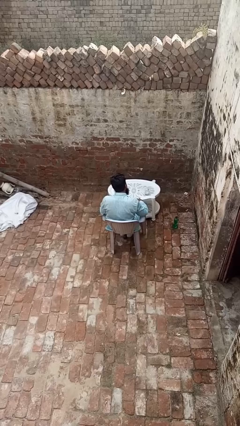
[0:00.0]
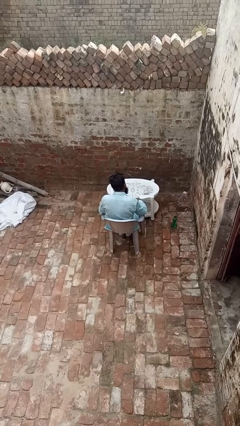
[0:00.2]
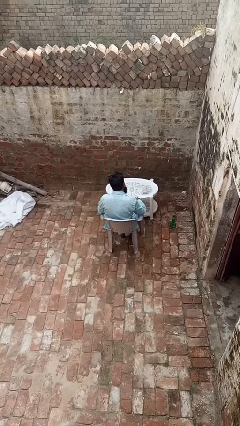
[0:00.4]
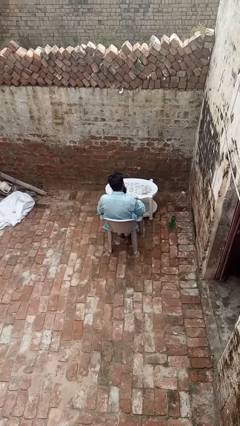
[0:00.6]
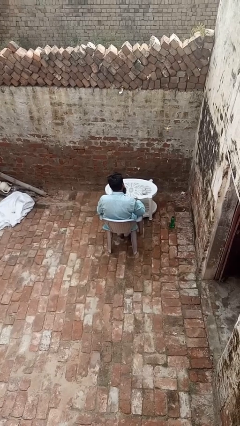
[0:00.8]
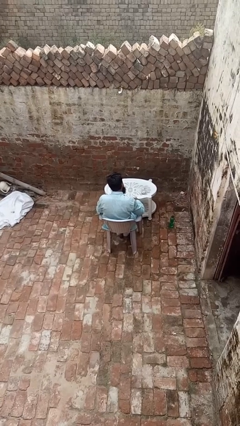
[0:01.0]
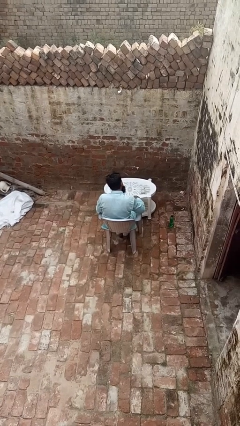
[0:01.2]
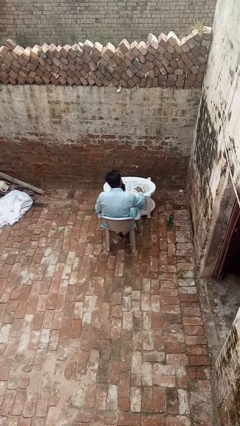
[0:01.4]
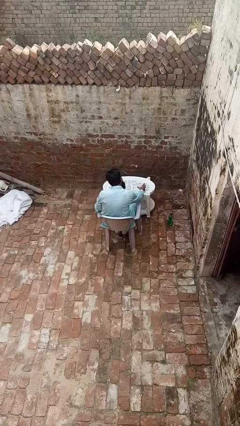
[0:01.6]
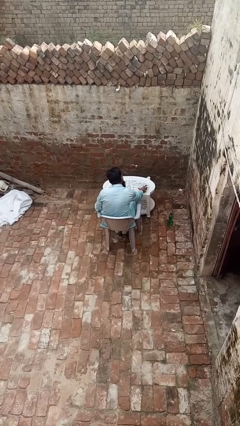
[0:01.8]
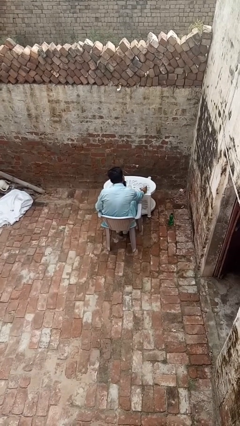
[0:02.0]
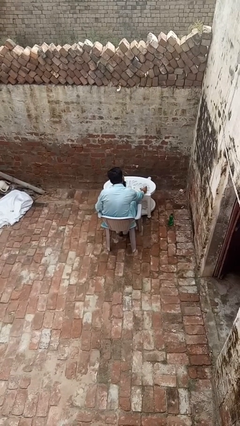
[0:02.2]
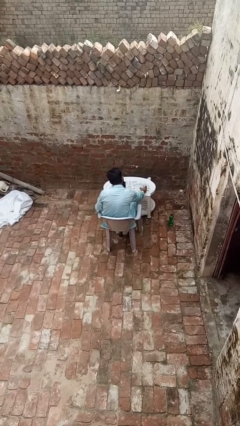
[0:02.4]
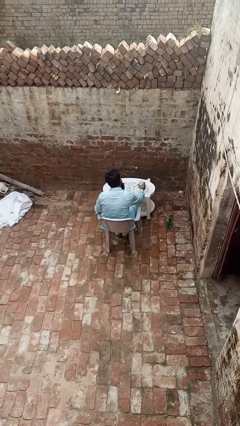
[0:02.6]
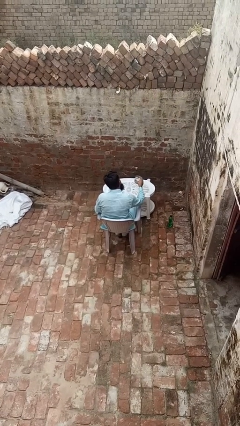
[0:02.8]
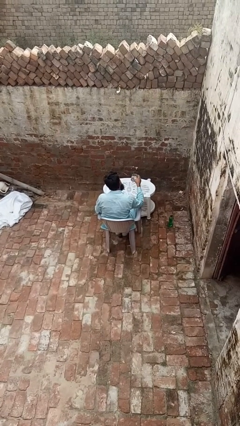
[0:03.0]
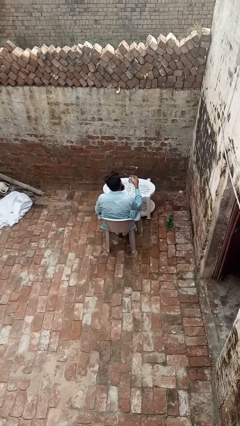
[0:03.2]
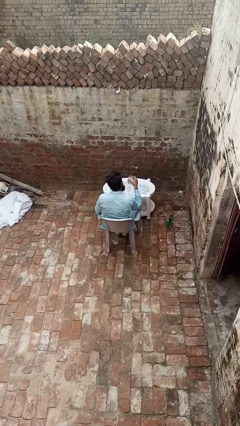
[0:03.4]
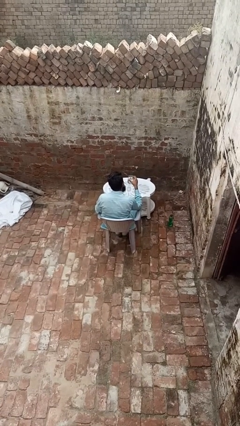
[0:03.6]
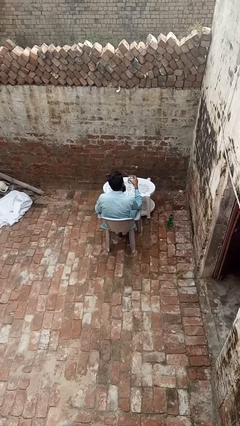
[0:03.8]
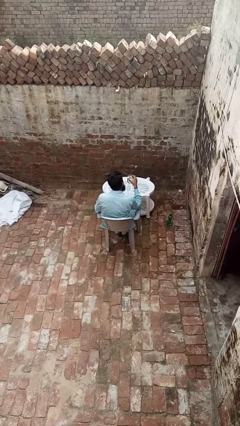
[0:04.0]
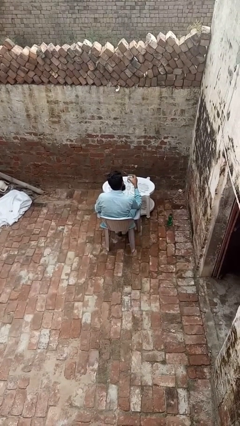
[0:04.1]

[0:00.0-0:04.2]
person picks up object from table

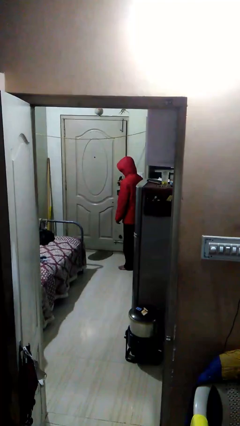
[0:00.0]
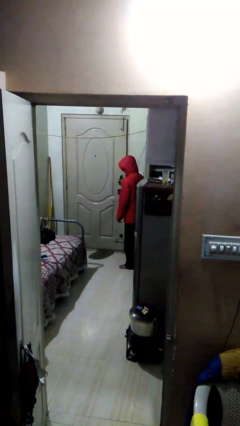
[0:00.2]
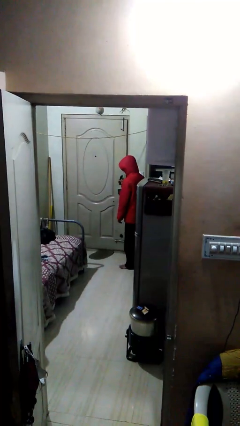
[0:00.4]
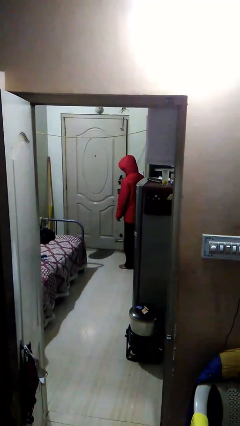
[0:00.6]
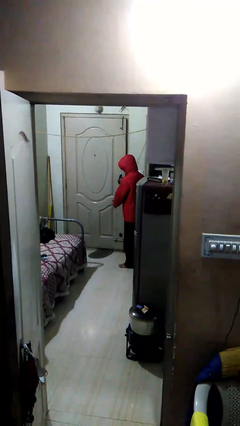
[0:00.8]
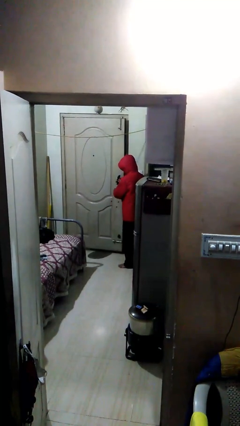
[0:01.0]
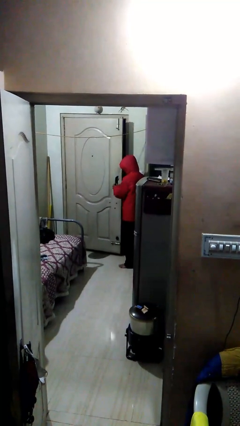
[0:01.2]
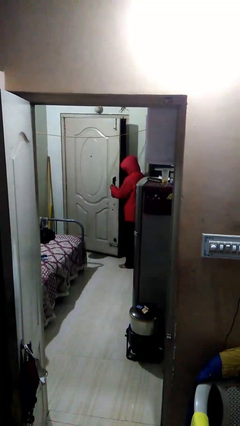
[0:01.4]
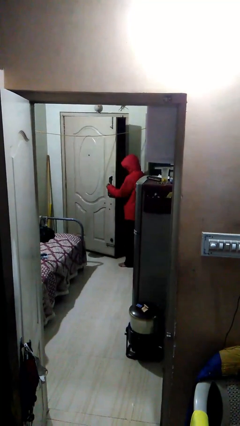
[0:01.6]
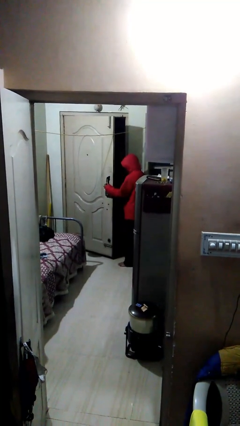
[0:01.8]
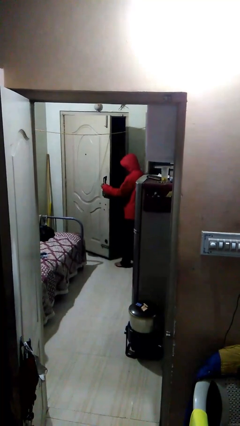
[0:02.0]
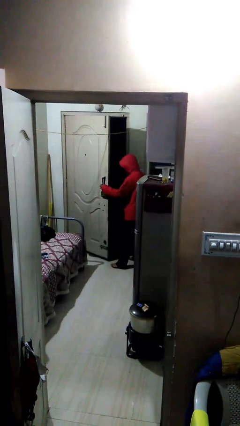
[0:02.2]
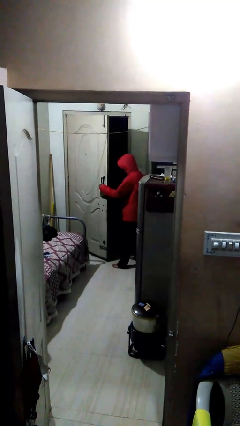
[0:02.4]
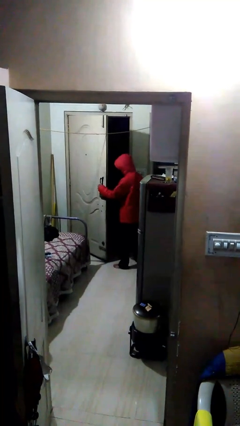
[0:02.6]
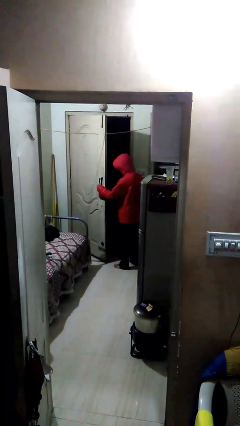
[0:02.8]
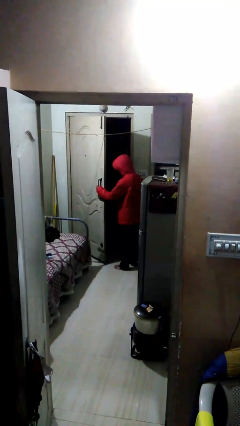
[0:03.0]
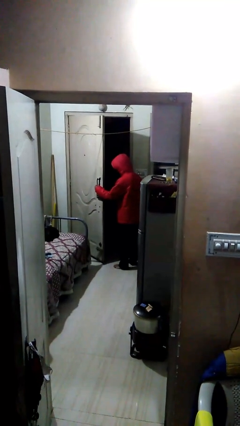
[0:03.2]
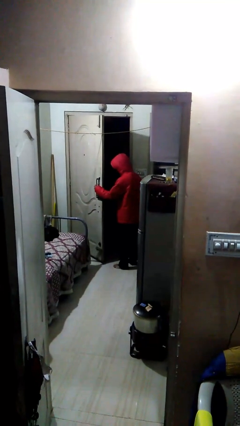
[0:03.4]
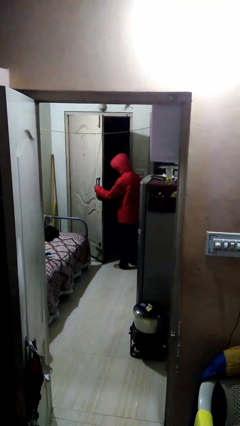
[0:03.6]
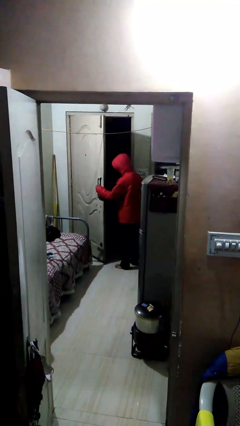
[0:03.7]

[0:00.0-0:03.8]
person opens facility door

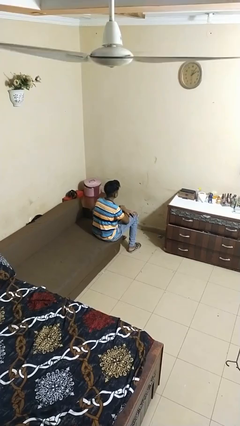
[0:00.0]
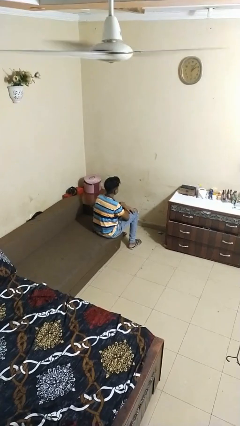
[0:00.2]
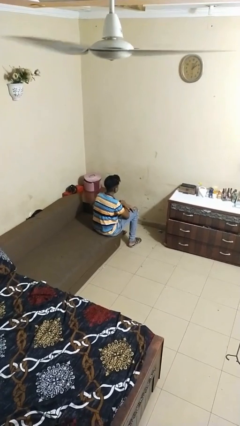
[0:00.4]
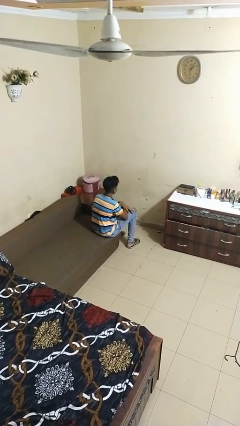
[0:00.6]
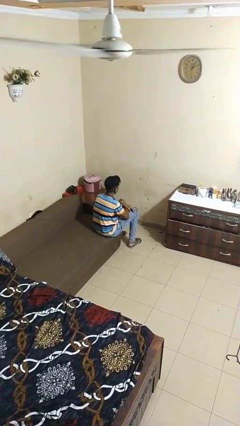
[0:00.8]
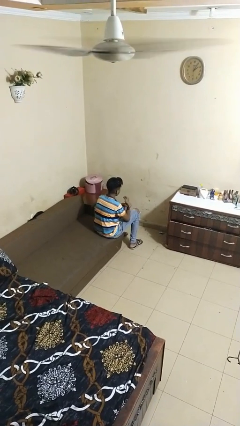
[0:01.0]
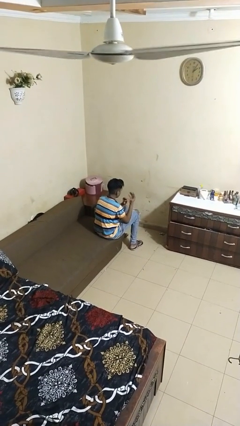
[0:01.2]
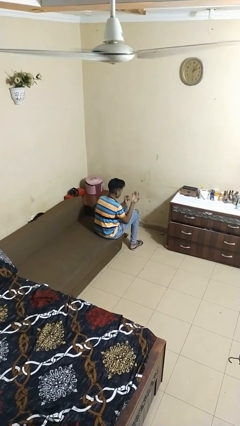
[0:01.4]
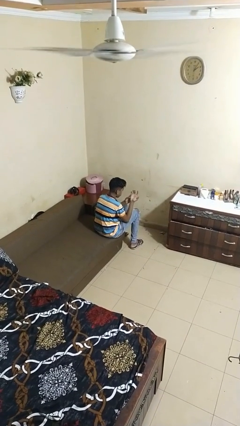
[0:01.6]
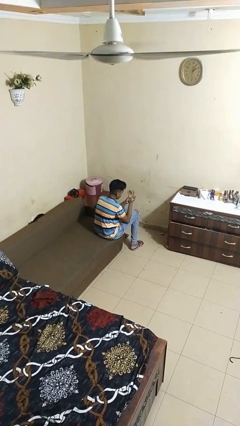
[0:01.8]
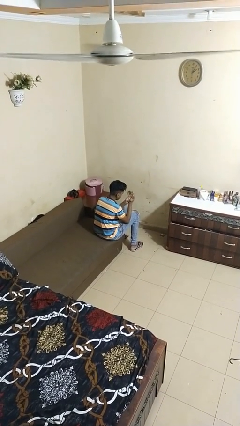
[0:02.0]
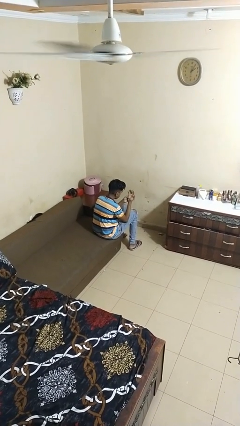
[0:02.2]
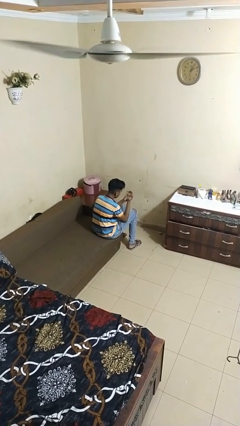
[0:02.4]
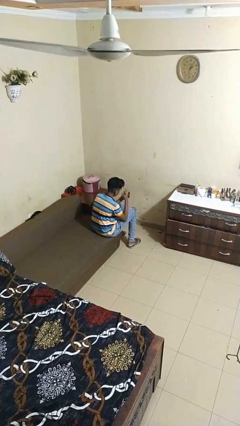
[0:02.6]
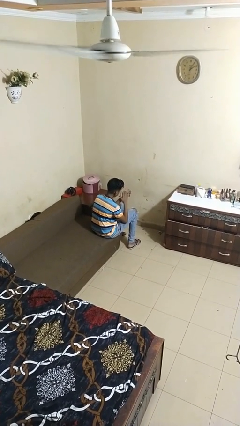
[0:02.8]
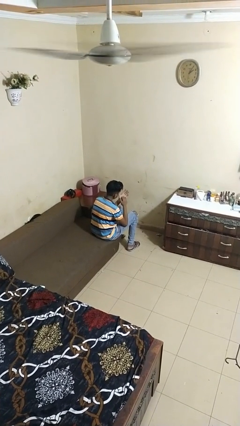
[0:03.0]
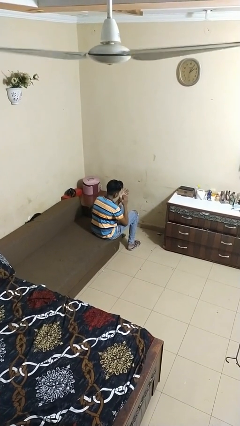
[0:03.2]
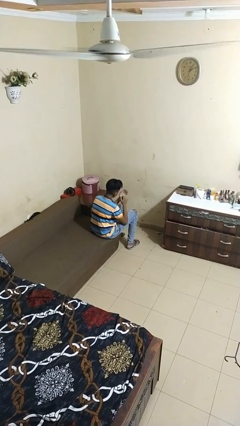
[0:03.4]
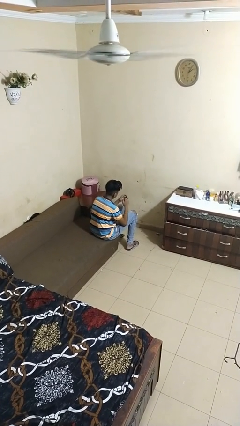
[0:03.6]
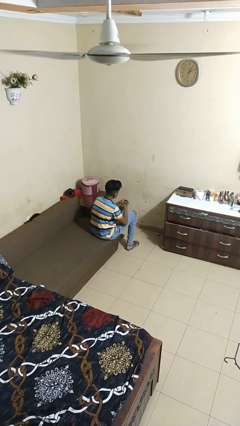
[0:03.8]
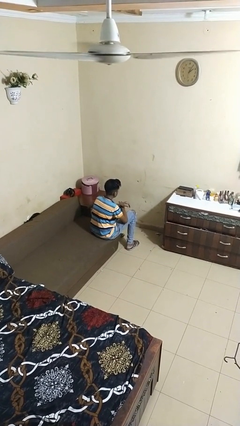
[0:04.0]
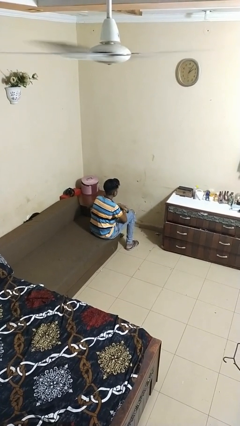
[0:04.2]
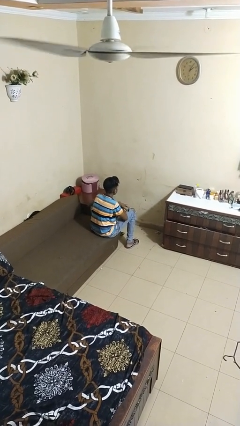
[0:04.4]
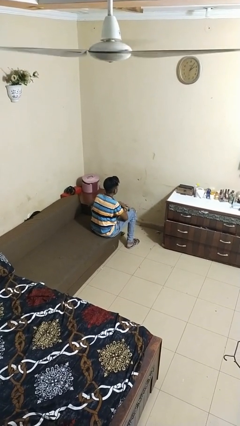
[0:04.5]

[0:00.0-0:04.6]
person looks at hands in lap

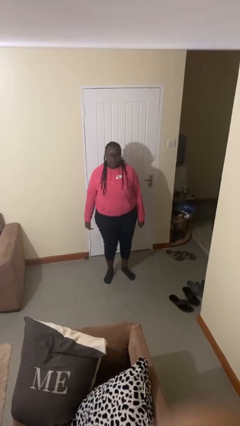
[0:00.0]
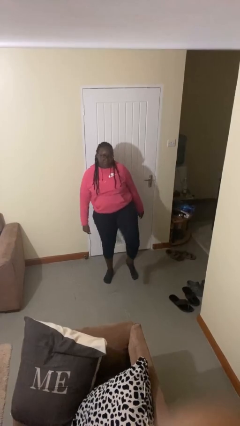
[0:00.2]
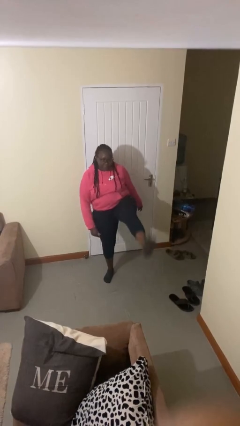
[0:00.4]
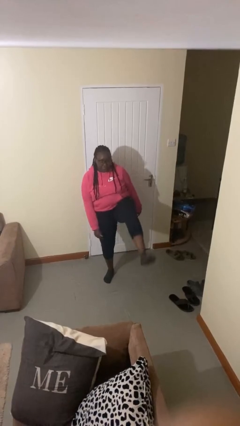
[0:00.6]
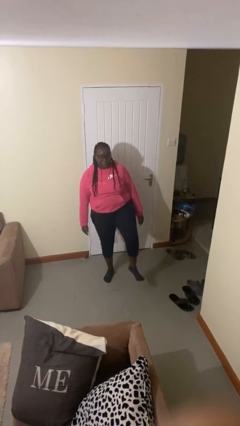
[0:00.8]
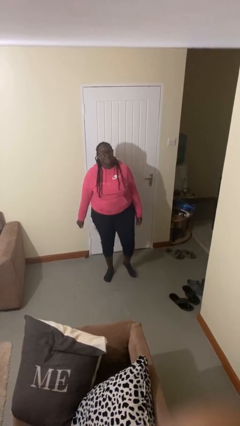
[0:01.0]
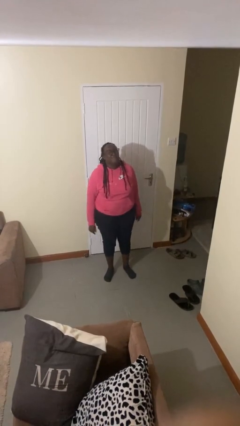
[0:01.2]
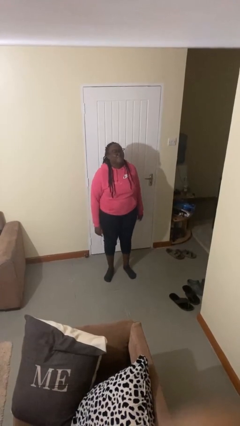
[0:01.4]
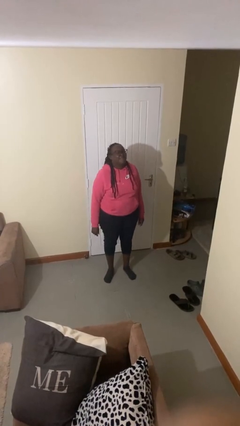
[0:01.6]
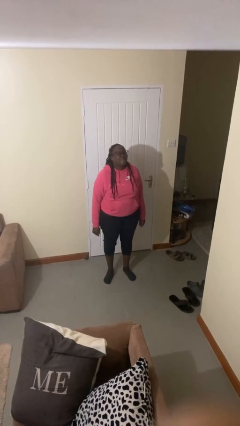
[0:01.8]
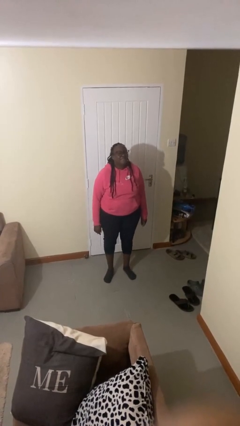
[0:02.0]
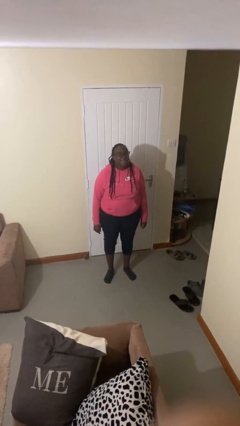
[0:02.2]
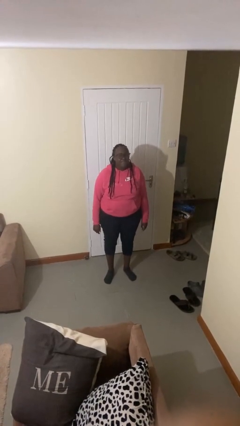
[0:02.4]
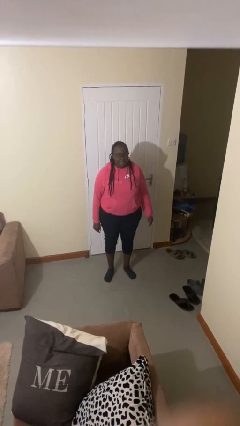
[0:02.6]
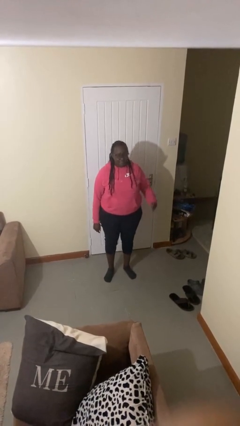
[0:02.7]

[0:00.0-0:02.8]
person karate kicks

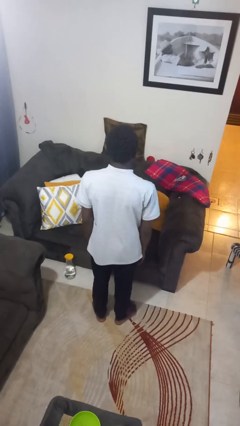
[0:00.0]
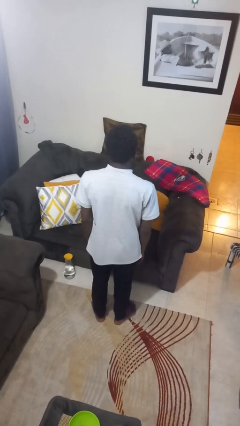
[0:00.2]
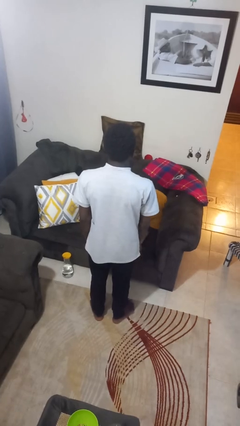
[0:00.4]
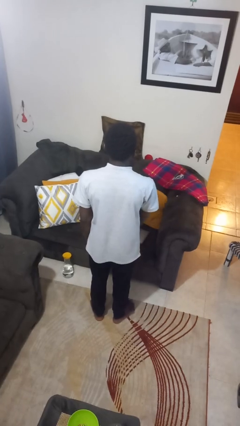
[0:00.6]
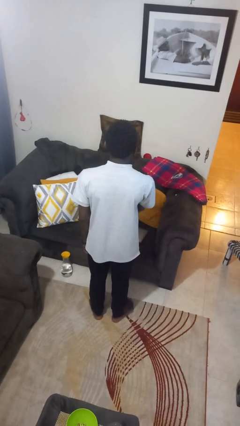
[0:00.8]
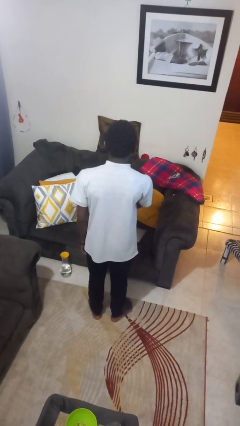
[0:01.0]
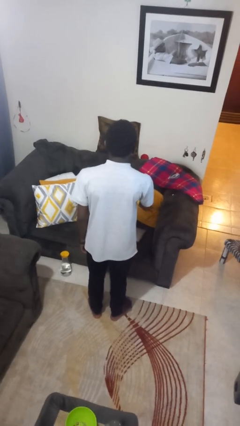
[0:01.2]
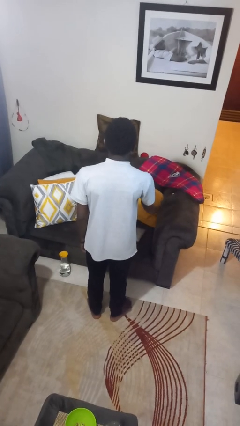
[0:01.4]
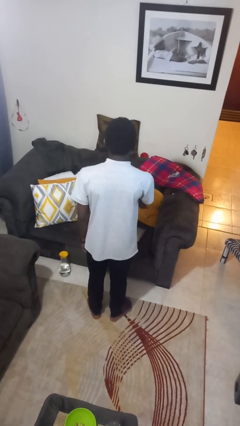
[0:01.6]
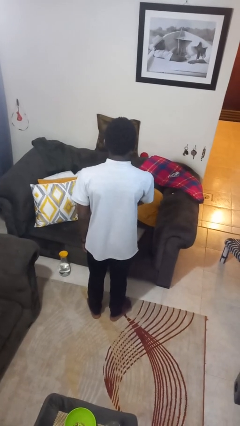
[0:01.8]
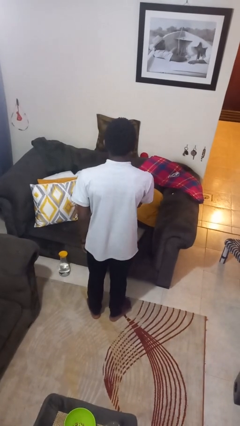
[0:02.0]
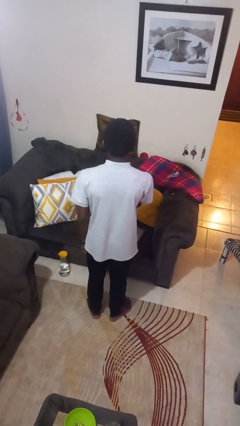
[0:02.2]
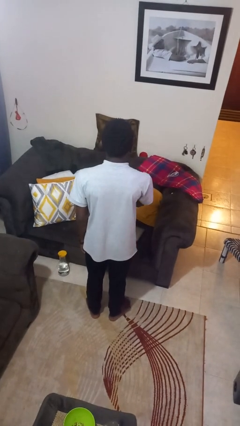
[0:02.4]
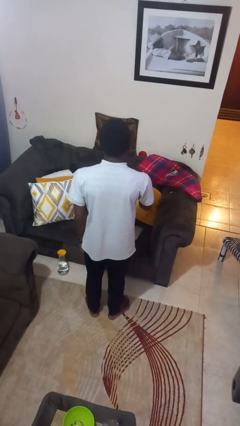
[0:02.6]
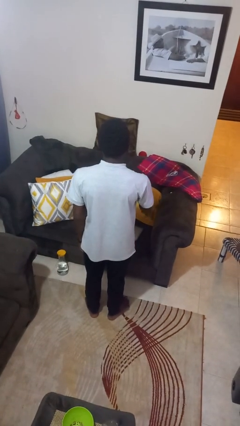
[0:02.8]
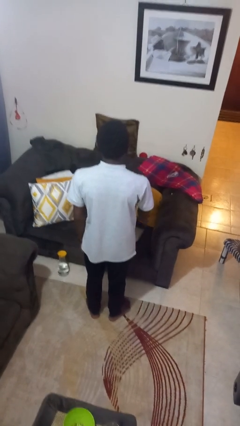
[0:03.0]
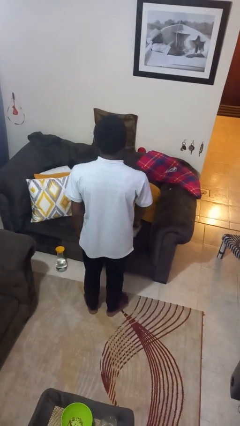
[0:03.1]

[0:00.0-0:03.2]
person waves hand over object
